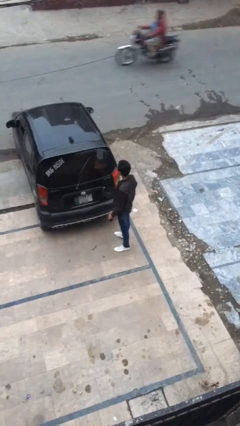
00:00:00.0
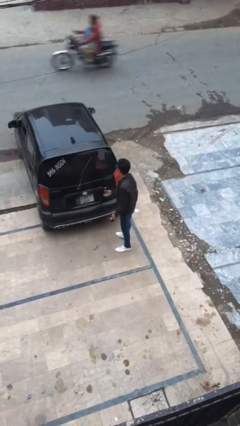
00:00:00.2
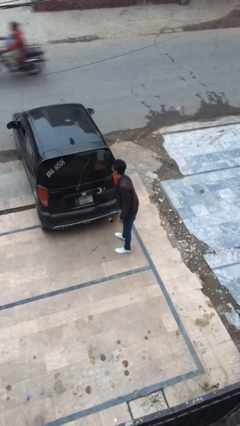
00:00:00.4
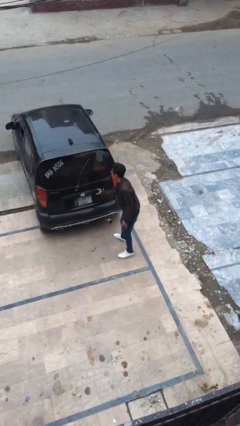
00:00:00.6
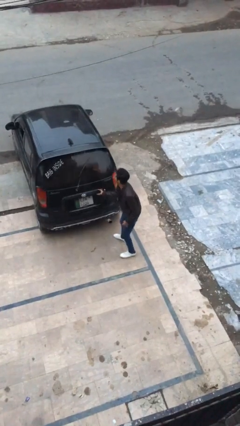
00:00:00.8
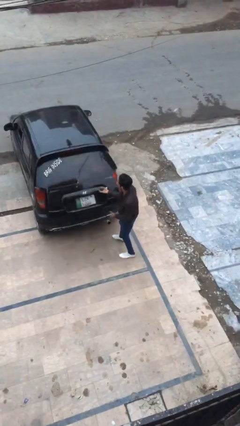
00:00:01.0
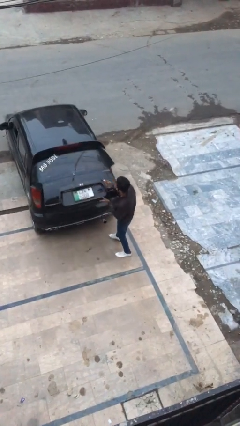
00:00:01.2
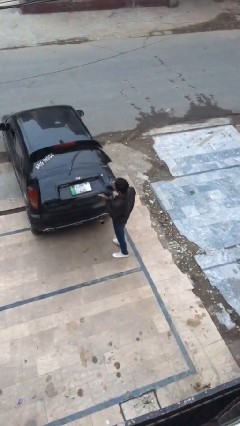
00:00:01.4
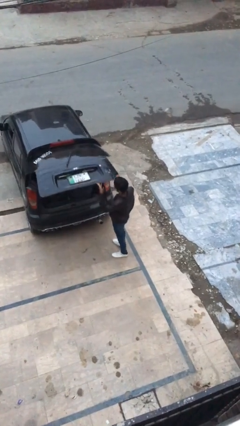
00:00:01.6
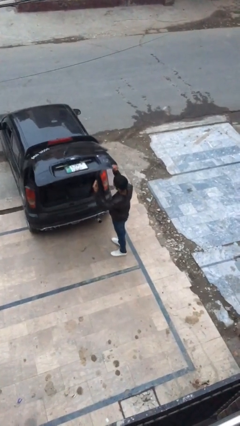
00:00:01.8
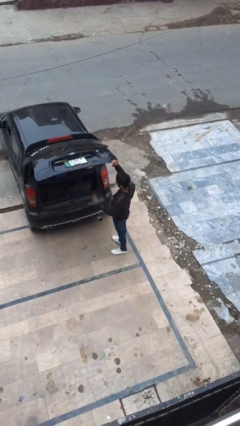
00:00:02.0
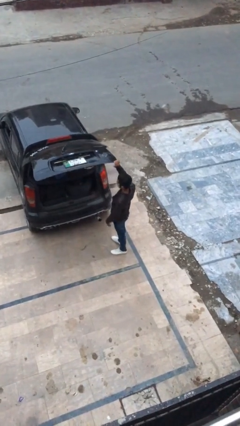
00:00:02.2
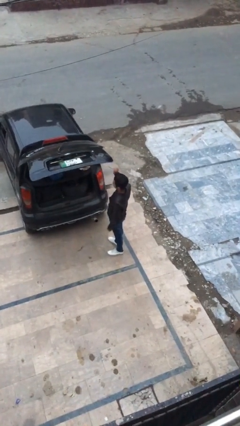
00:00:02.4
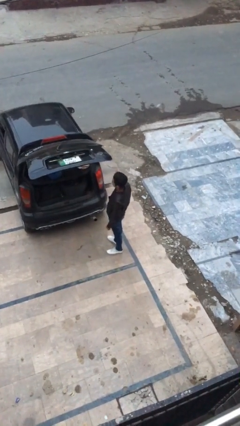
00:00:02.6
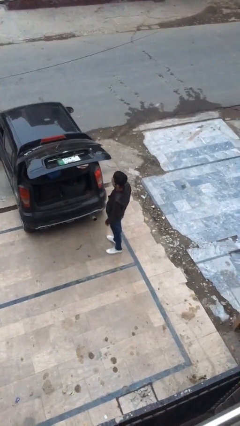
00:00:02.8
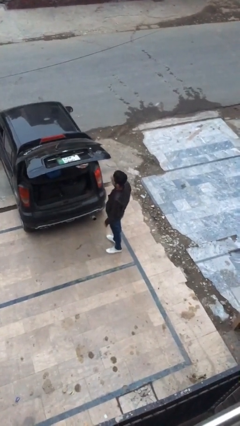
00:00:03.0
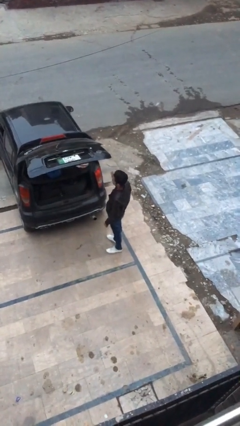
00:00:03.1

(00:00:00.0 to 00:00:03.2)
person opens car trunk

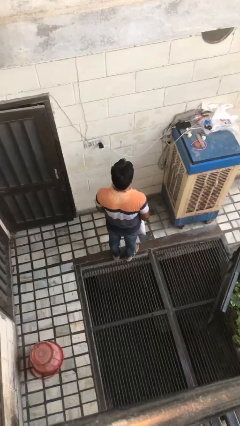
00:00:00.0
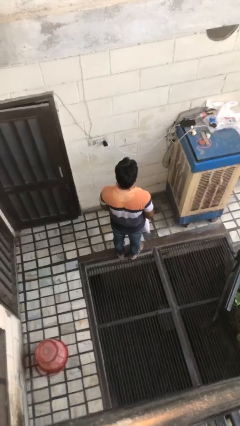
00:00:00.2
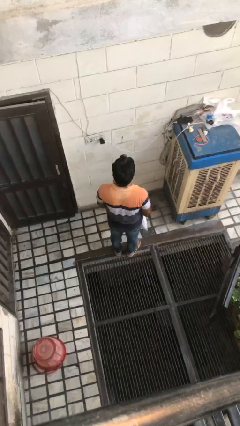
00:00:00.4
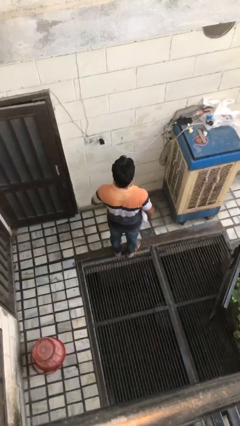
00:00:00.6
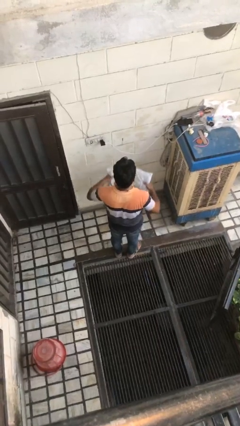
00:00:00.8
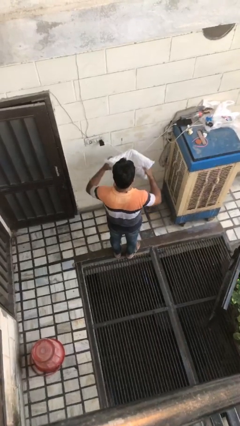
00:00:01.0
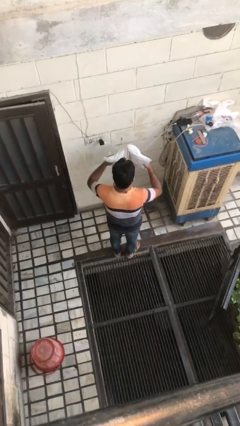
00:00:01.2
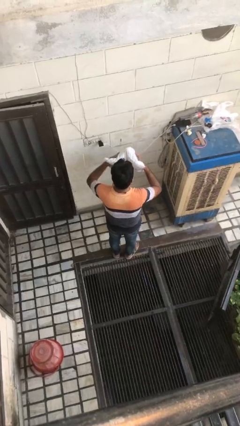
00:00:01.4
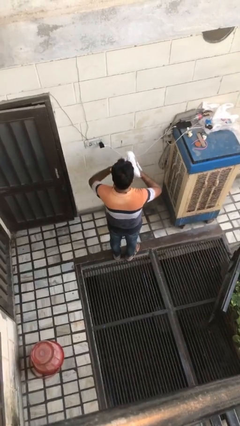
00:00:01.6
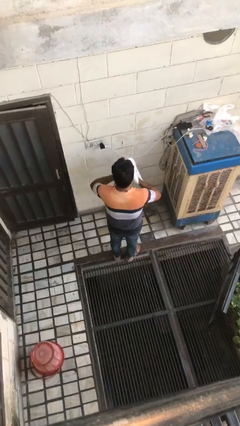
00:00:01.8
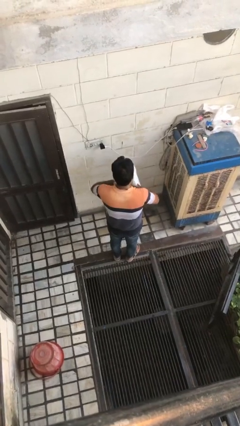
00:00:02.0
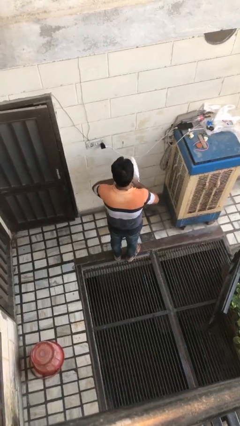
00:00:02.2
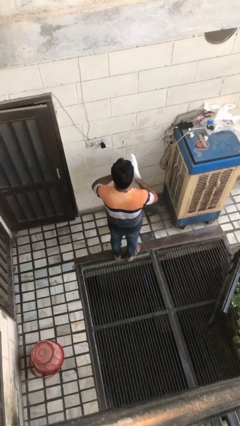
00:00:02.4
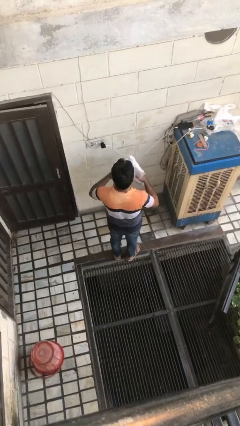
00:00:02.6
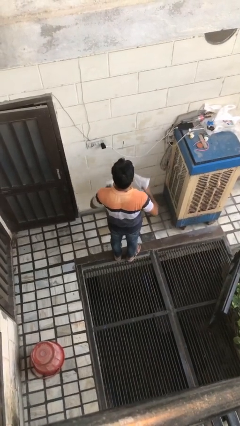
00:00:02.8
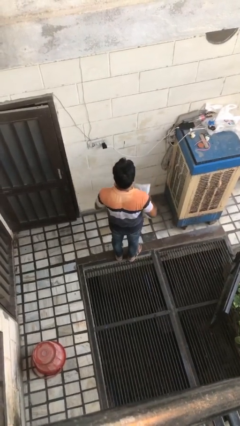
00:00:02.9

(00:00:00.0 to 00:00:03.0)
person squeezes object

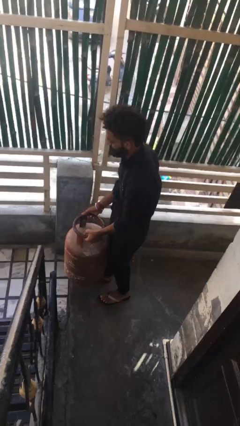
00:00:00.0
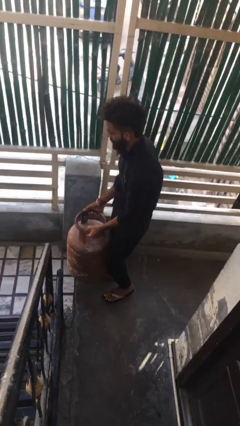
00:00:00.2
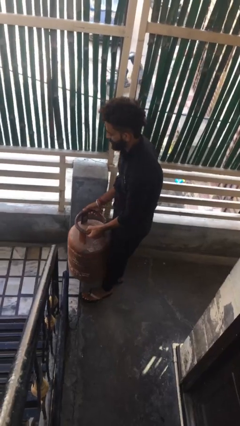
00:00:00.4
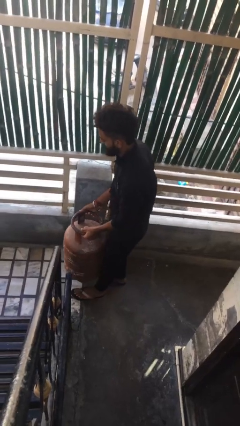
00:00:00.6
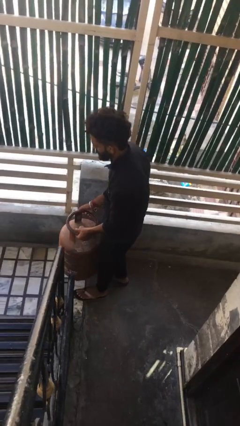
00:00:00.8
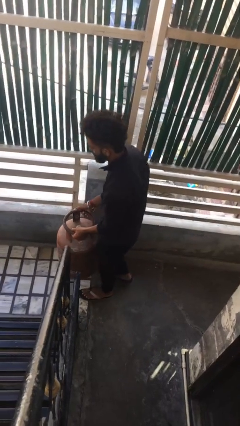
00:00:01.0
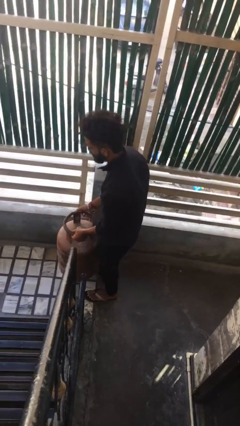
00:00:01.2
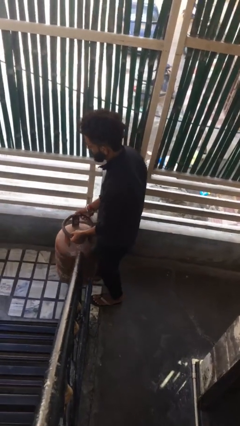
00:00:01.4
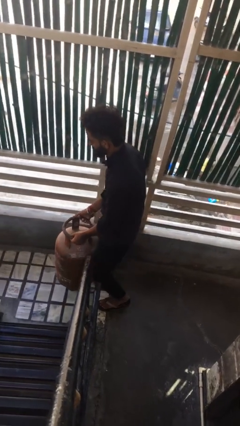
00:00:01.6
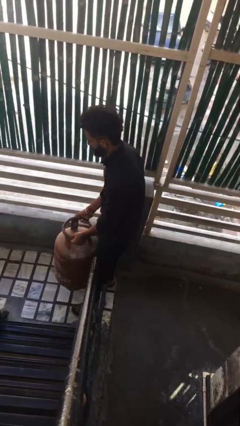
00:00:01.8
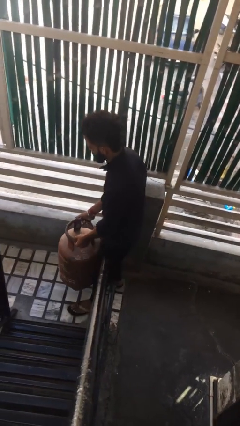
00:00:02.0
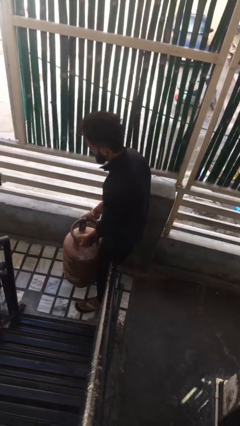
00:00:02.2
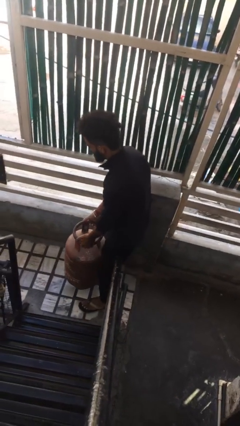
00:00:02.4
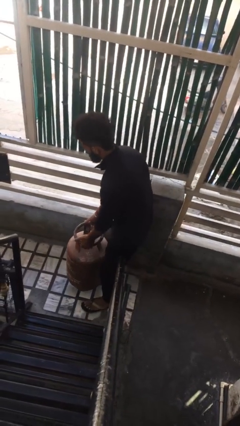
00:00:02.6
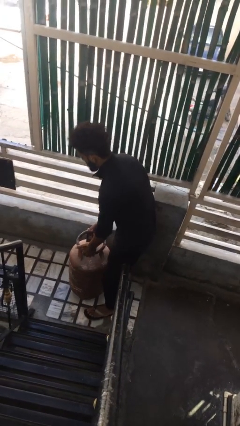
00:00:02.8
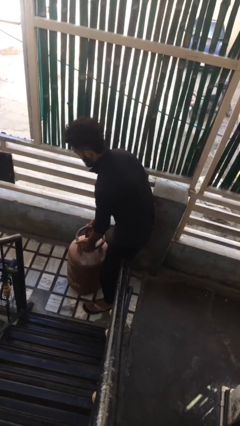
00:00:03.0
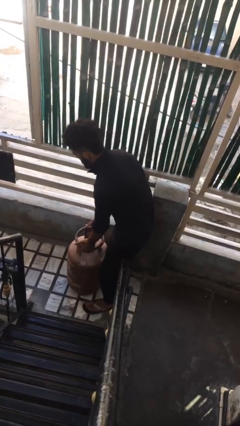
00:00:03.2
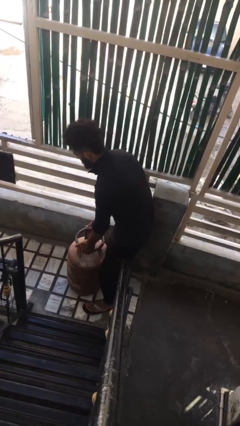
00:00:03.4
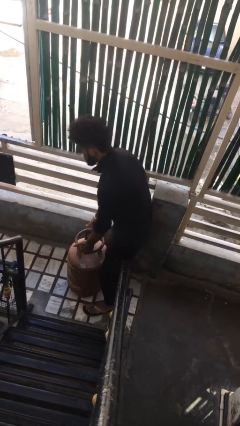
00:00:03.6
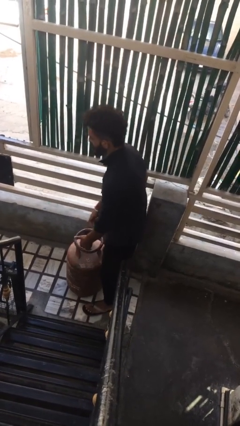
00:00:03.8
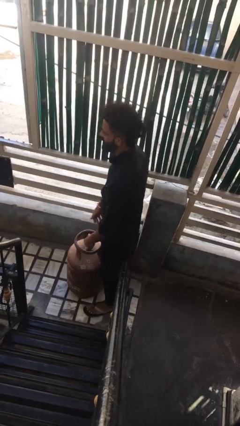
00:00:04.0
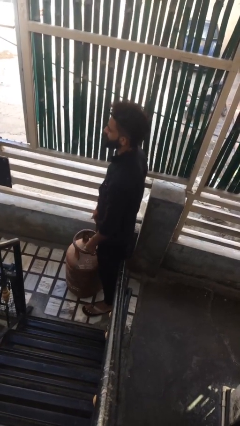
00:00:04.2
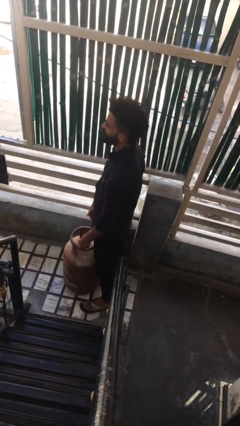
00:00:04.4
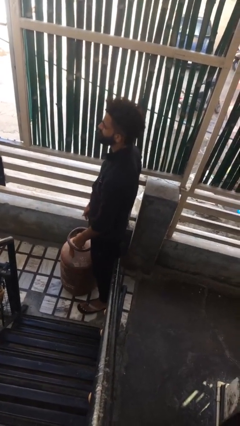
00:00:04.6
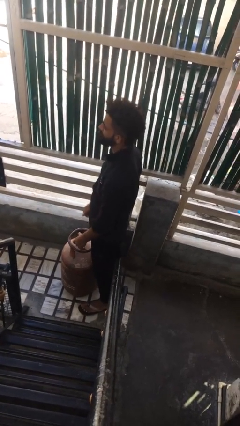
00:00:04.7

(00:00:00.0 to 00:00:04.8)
person carries heavy object

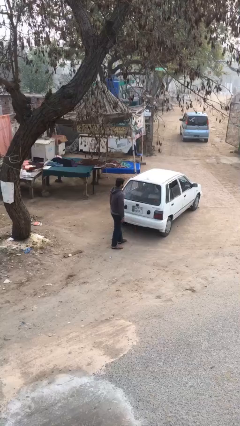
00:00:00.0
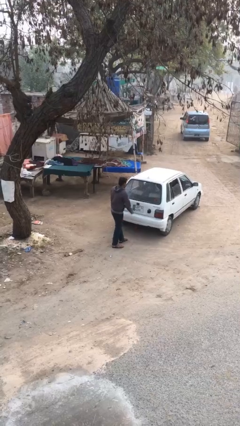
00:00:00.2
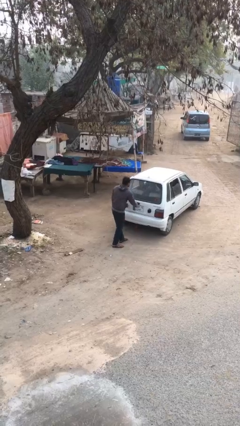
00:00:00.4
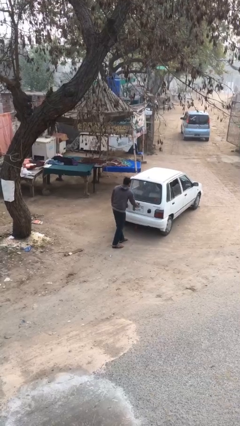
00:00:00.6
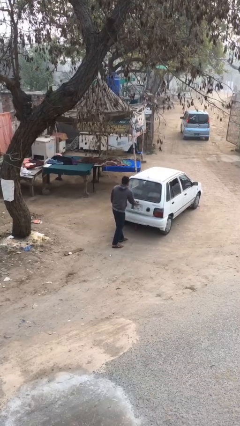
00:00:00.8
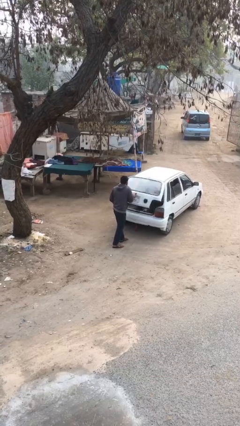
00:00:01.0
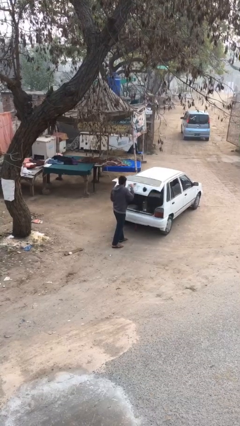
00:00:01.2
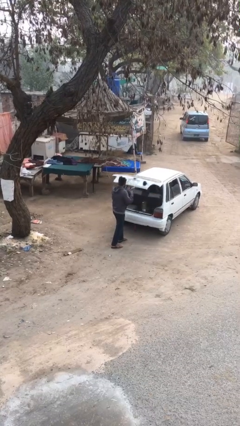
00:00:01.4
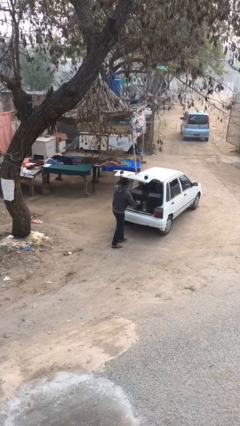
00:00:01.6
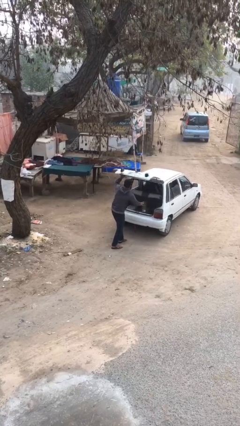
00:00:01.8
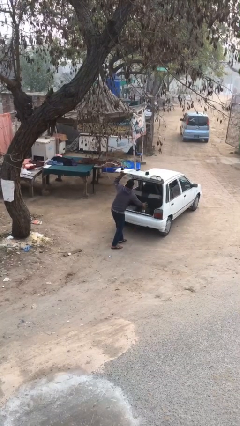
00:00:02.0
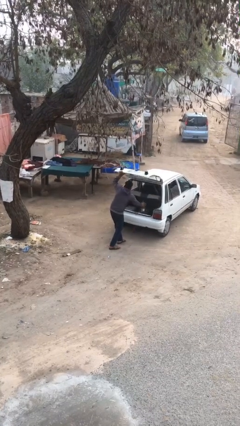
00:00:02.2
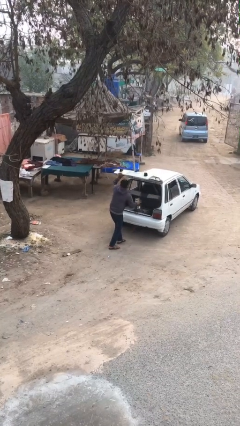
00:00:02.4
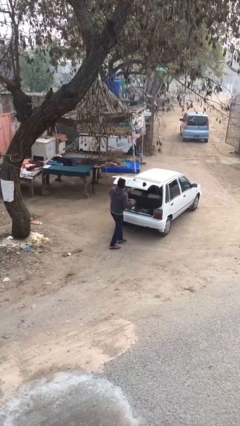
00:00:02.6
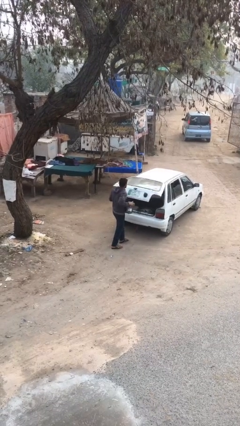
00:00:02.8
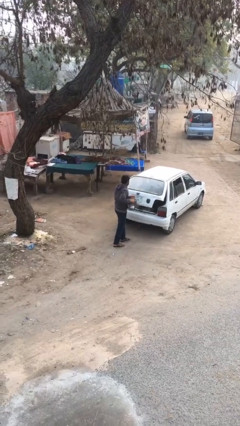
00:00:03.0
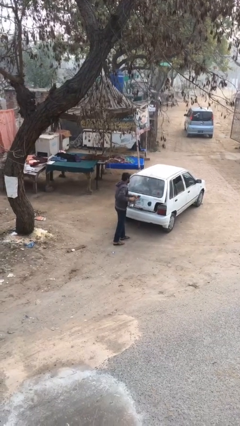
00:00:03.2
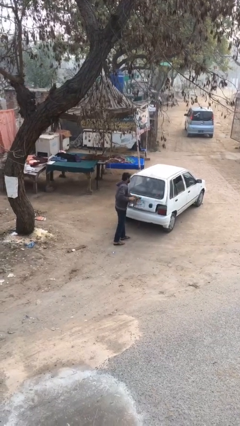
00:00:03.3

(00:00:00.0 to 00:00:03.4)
person unloads car

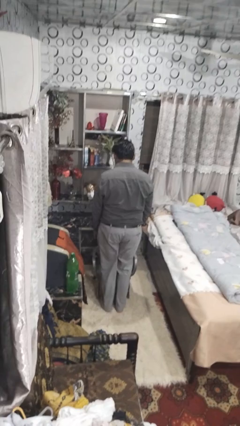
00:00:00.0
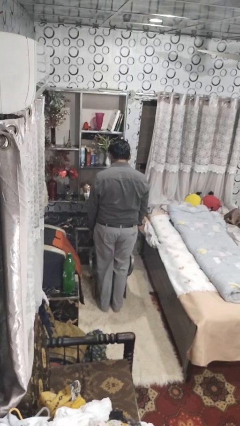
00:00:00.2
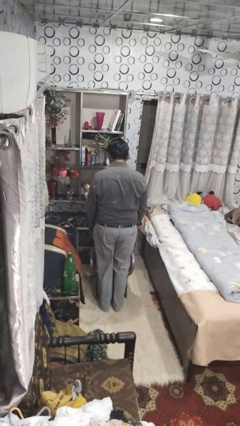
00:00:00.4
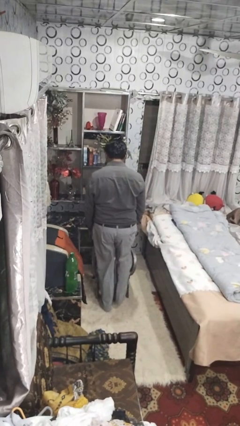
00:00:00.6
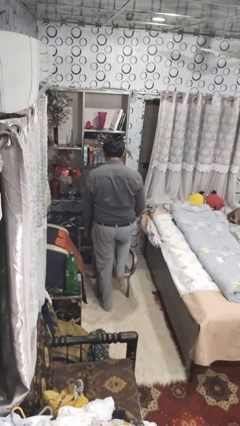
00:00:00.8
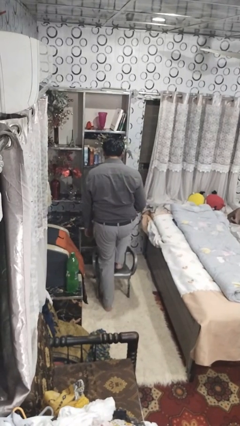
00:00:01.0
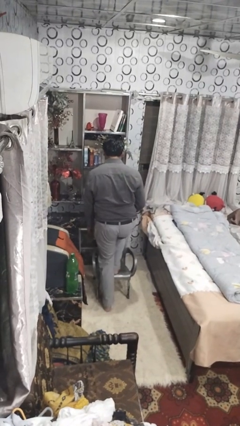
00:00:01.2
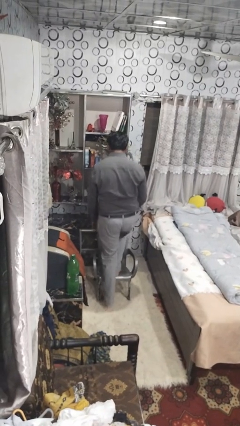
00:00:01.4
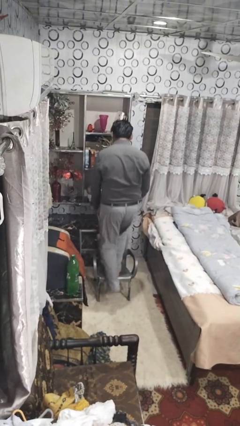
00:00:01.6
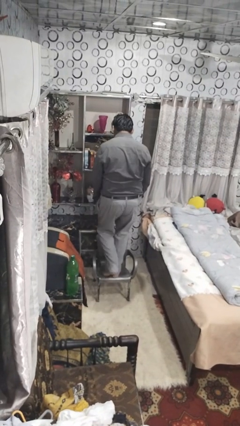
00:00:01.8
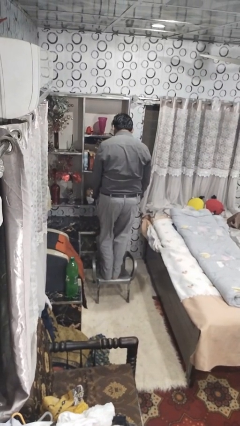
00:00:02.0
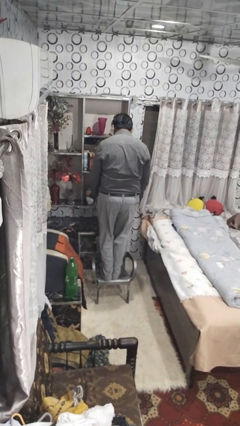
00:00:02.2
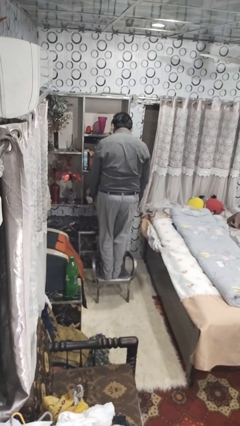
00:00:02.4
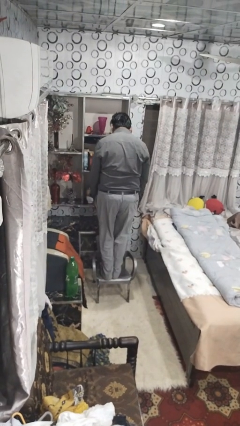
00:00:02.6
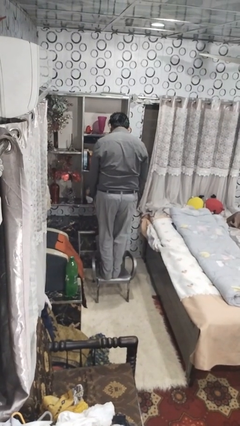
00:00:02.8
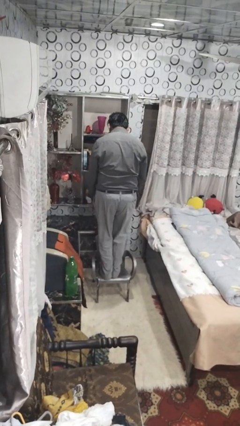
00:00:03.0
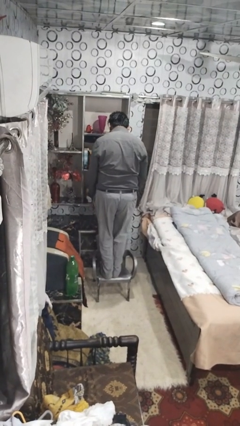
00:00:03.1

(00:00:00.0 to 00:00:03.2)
person climbs on chair
